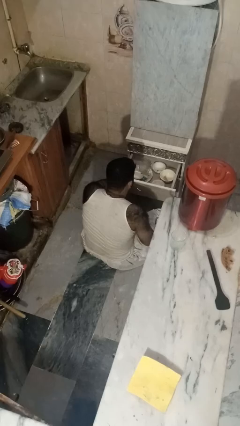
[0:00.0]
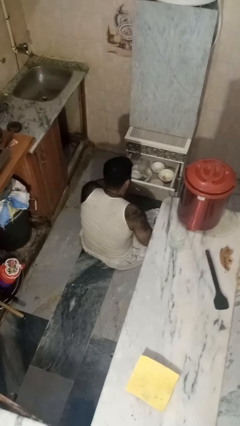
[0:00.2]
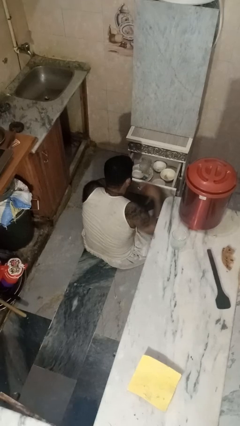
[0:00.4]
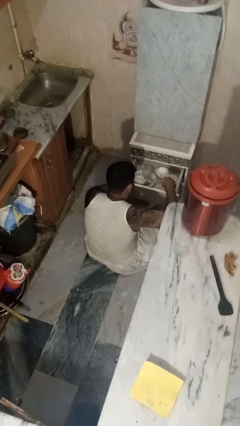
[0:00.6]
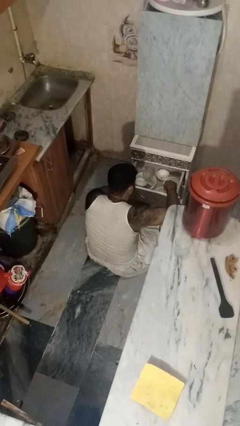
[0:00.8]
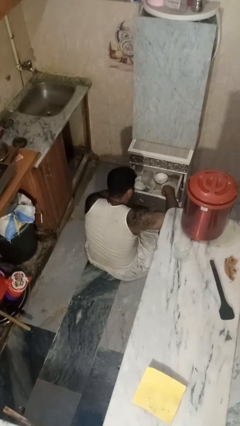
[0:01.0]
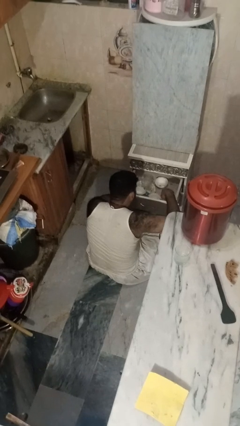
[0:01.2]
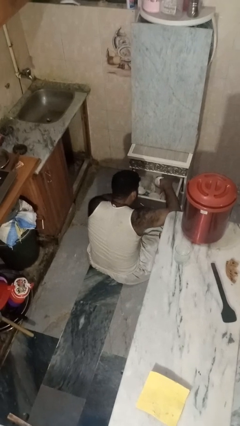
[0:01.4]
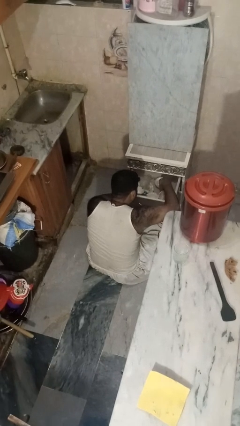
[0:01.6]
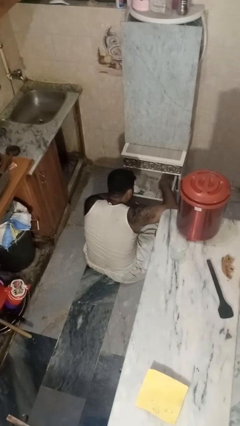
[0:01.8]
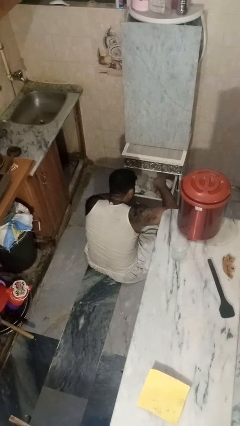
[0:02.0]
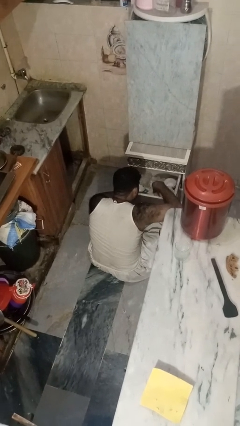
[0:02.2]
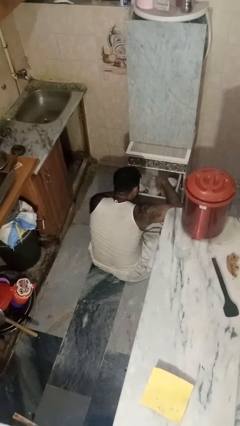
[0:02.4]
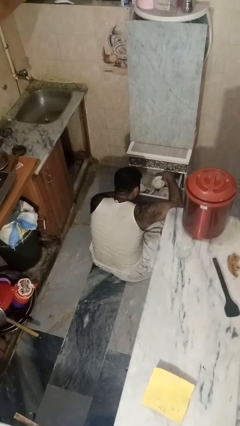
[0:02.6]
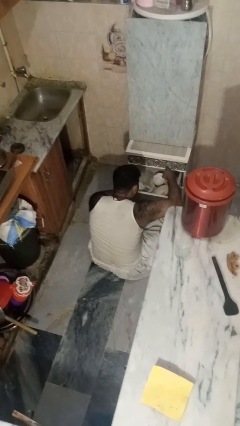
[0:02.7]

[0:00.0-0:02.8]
person searches in kitchen drawer

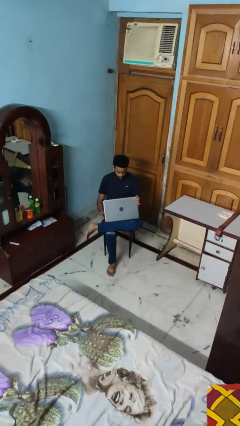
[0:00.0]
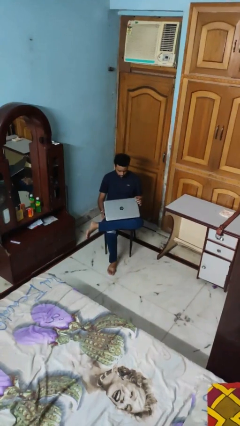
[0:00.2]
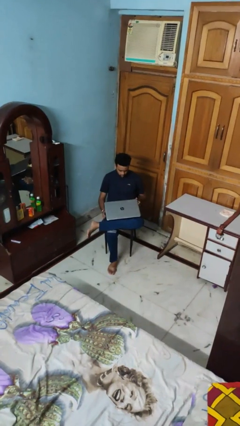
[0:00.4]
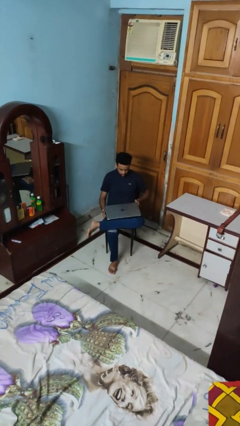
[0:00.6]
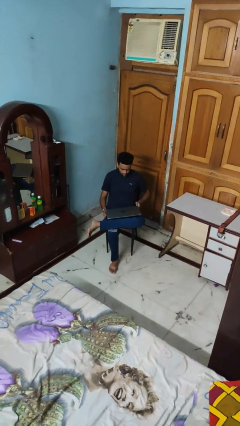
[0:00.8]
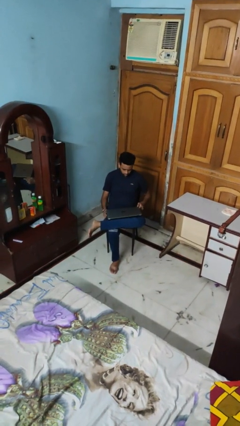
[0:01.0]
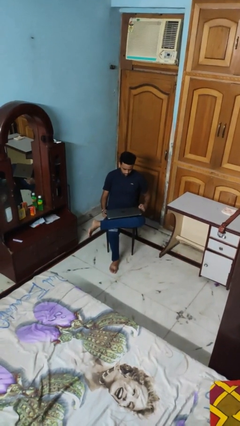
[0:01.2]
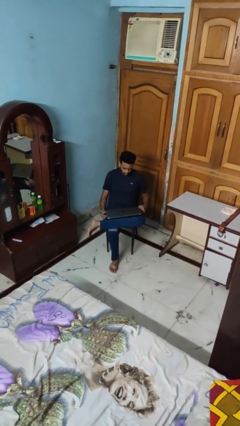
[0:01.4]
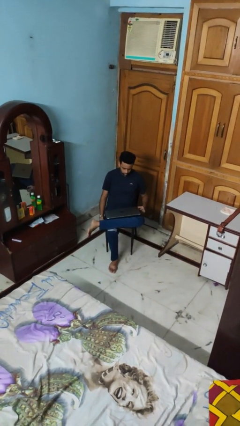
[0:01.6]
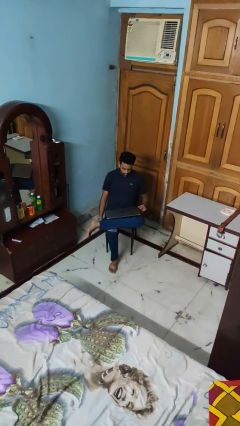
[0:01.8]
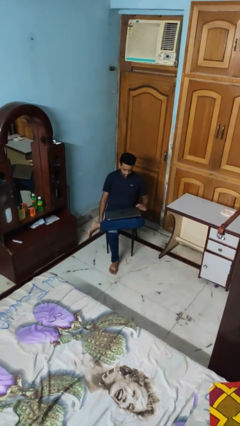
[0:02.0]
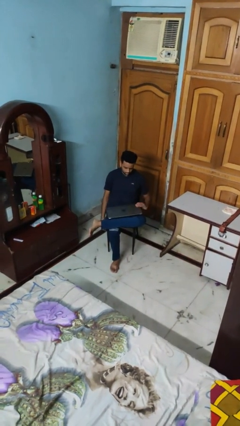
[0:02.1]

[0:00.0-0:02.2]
person closes laptop

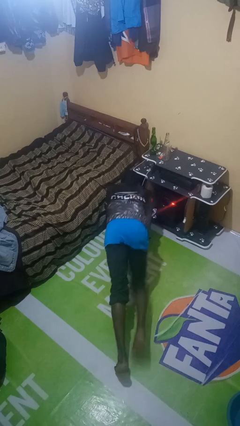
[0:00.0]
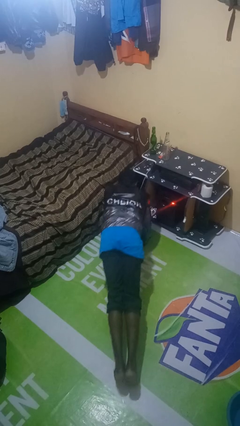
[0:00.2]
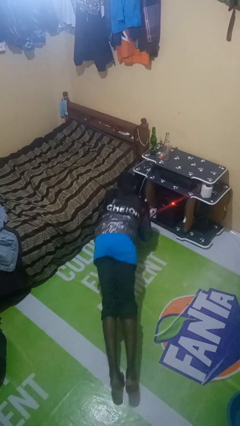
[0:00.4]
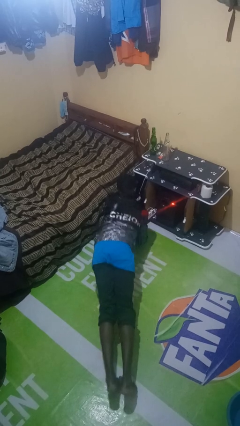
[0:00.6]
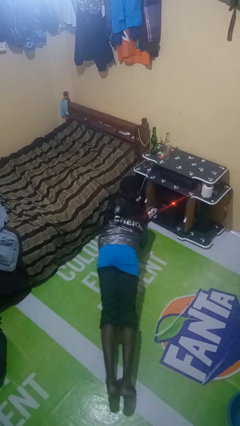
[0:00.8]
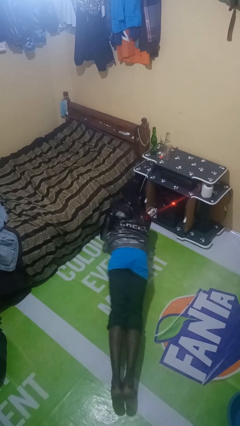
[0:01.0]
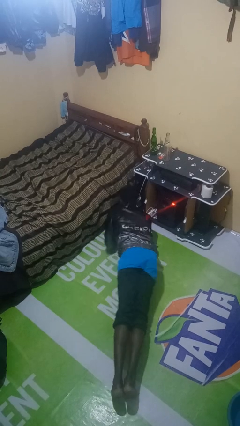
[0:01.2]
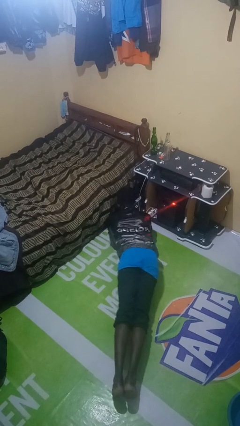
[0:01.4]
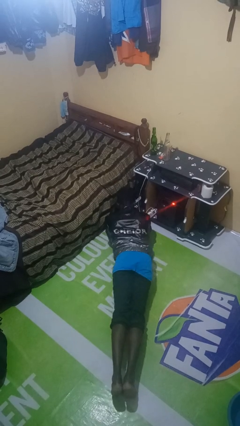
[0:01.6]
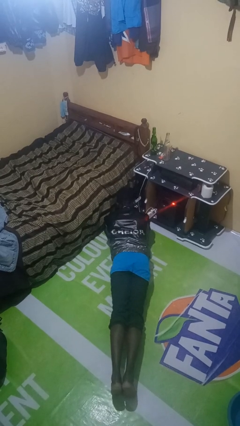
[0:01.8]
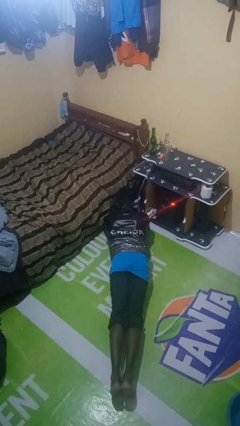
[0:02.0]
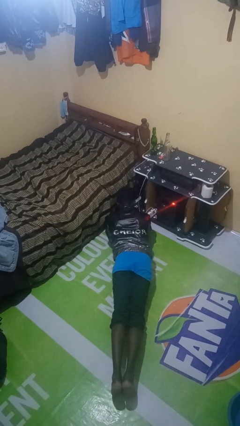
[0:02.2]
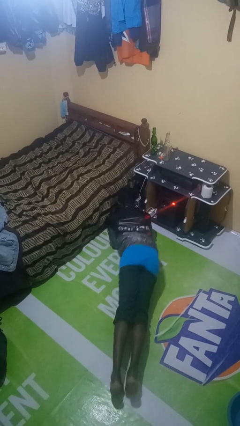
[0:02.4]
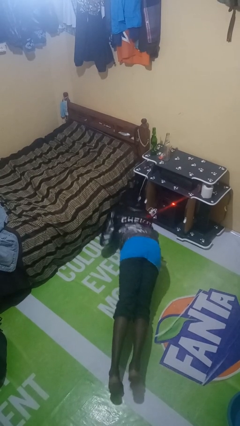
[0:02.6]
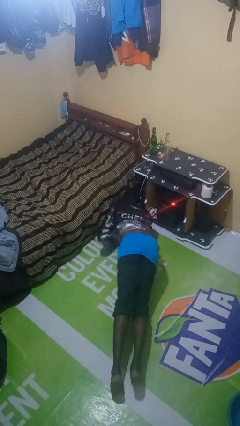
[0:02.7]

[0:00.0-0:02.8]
person exercises with plank

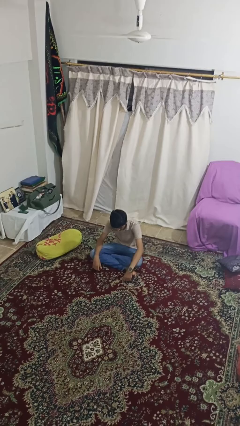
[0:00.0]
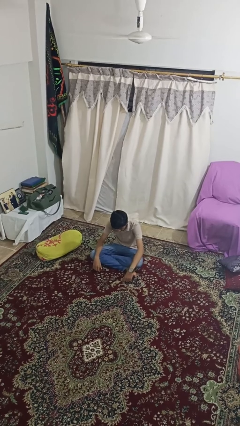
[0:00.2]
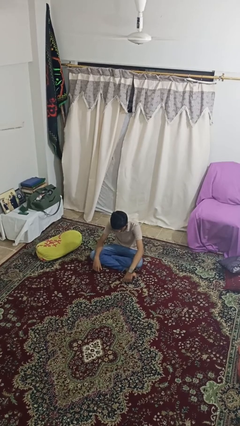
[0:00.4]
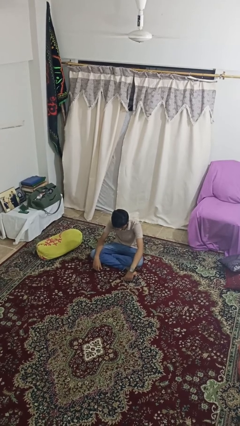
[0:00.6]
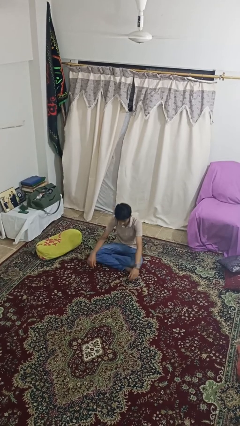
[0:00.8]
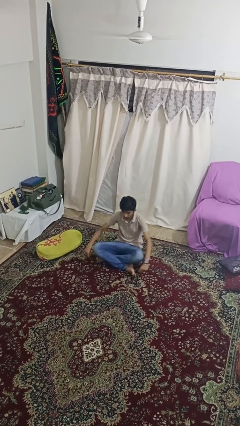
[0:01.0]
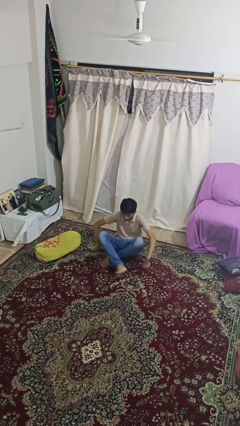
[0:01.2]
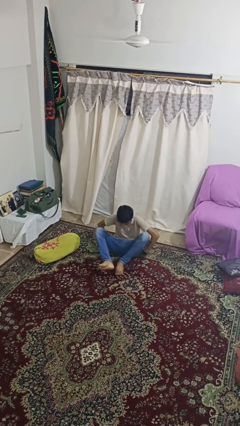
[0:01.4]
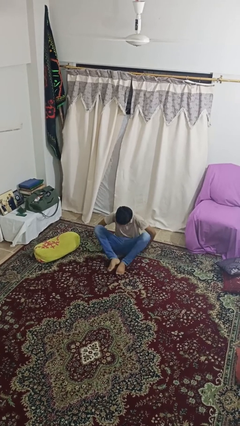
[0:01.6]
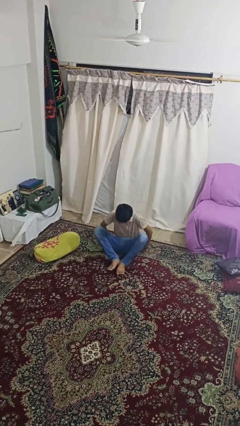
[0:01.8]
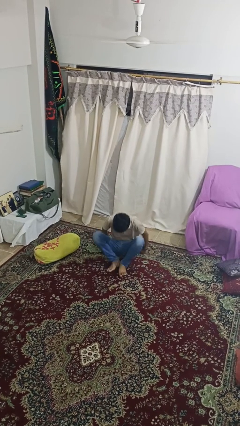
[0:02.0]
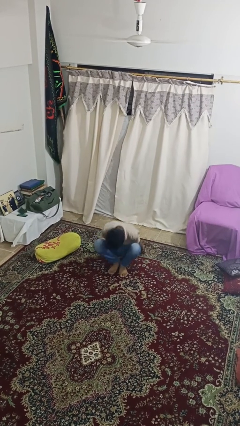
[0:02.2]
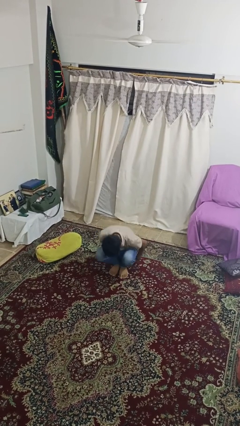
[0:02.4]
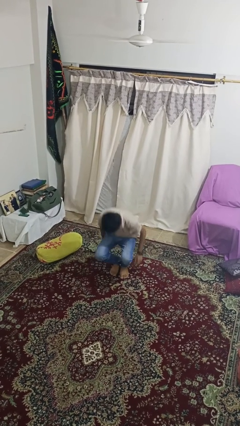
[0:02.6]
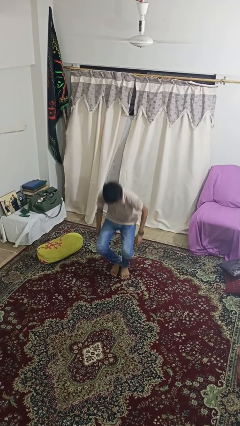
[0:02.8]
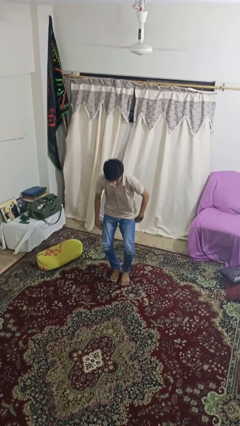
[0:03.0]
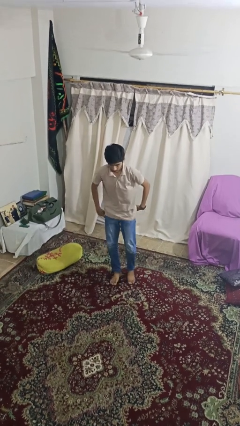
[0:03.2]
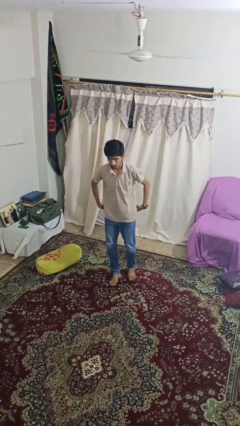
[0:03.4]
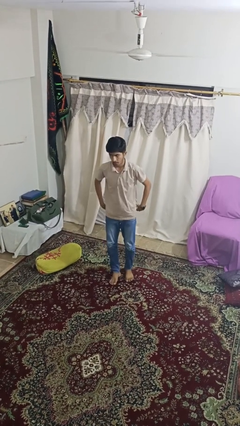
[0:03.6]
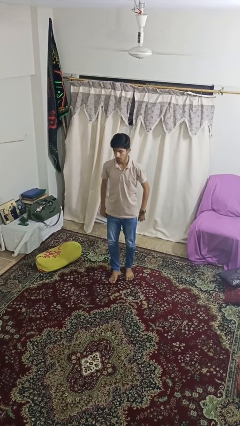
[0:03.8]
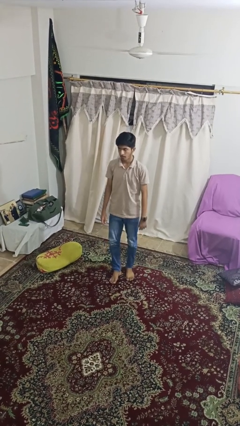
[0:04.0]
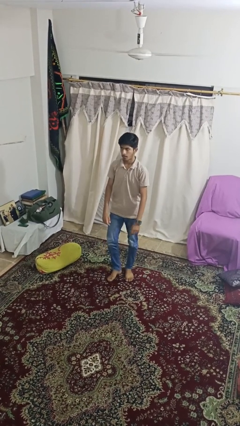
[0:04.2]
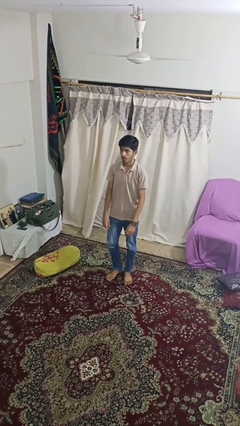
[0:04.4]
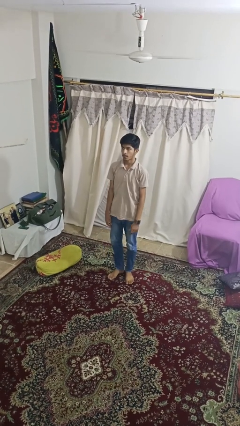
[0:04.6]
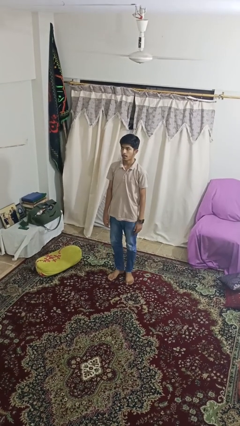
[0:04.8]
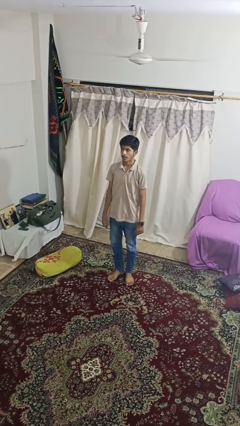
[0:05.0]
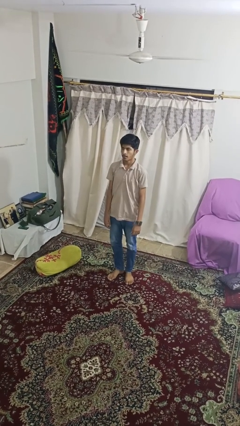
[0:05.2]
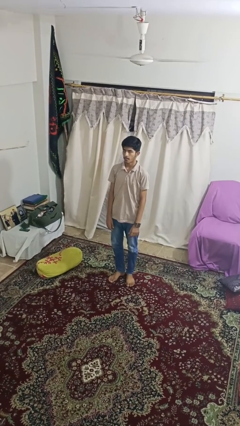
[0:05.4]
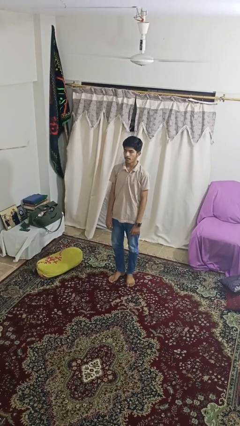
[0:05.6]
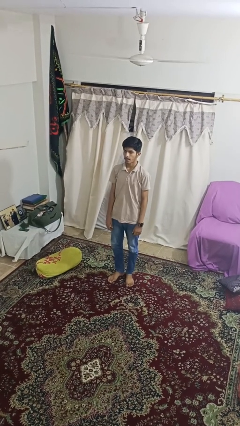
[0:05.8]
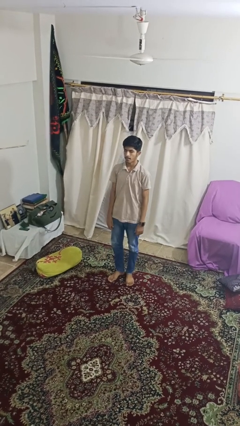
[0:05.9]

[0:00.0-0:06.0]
person stands up from floor

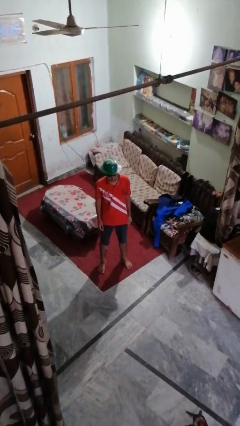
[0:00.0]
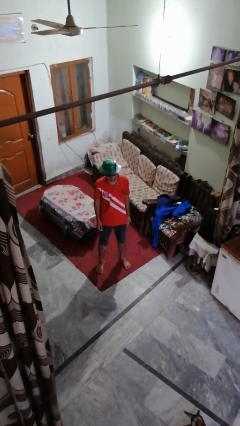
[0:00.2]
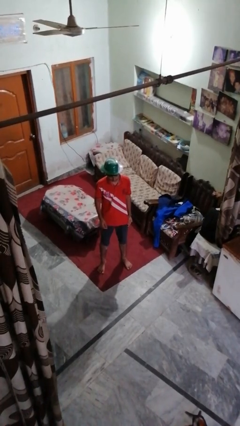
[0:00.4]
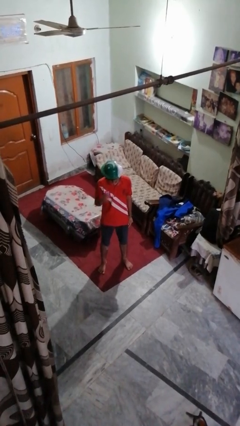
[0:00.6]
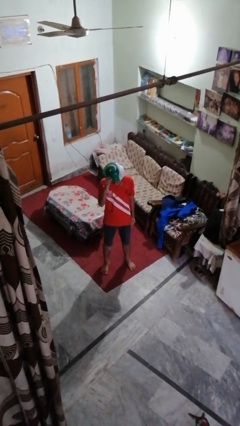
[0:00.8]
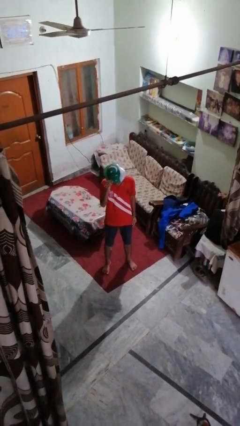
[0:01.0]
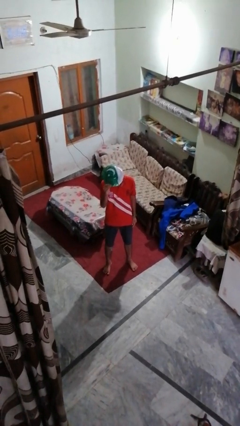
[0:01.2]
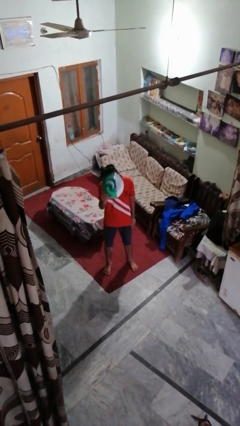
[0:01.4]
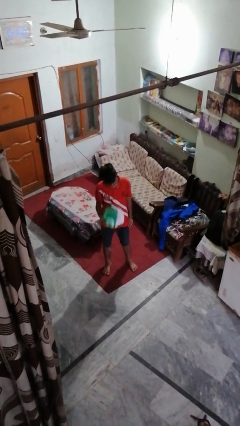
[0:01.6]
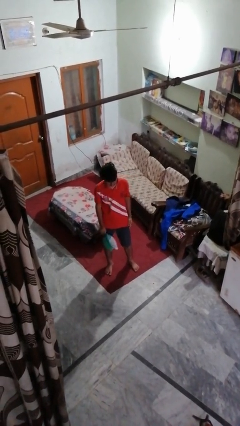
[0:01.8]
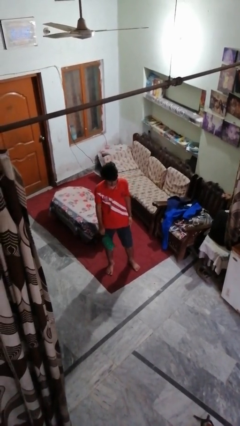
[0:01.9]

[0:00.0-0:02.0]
person takes off hat

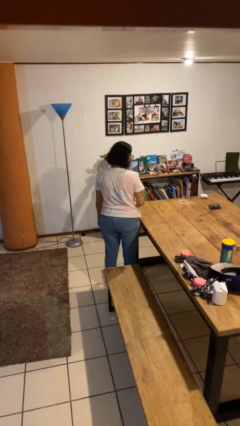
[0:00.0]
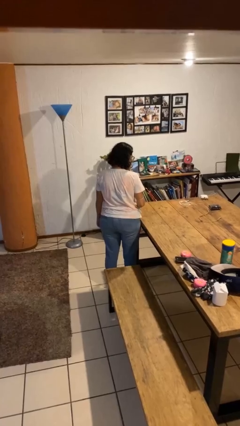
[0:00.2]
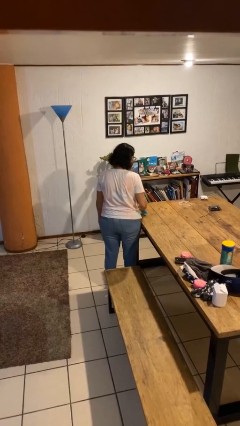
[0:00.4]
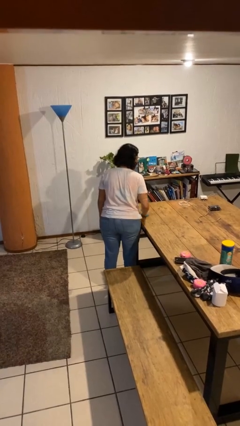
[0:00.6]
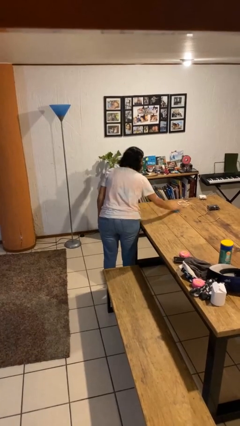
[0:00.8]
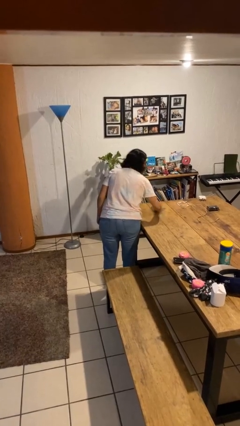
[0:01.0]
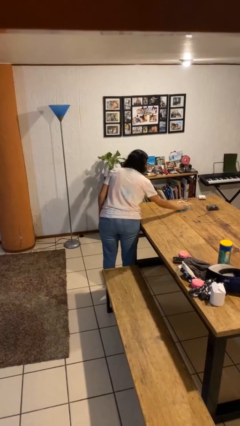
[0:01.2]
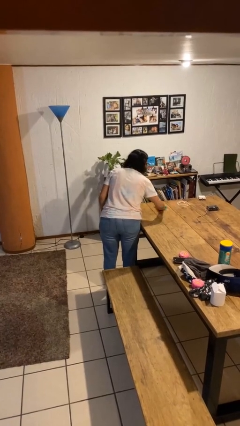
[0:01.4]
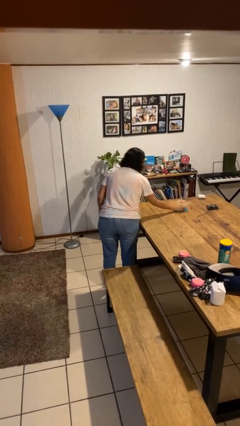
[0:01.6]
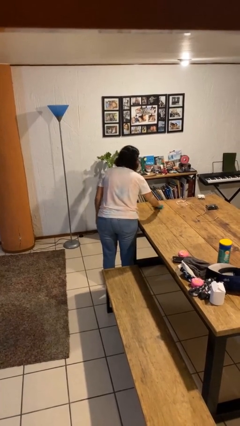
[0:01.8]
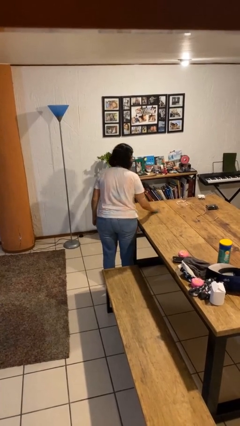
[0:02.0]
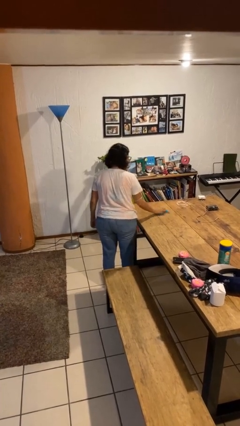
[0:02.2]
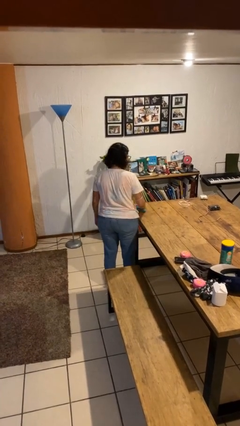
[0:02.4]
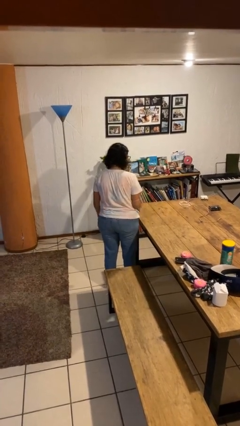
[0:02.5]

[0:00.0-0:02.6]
person cleans table with rag
